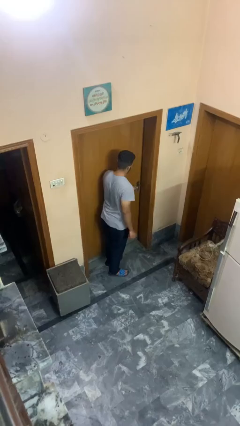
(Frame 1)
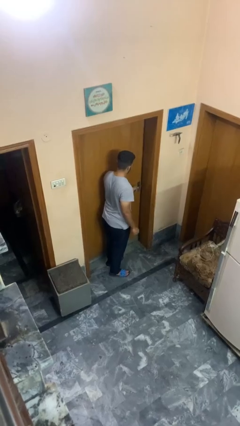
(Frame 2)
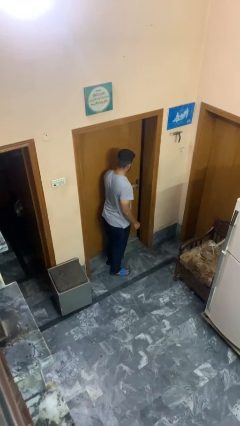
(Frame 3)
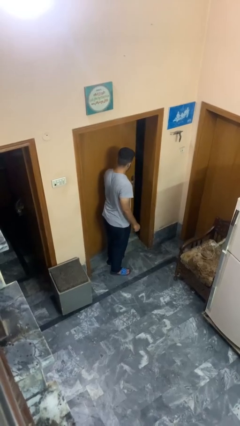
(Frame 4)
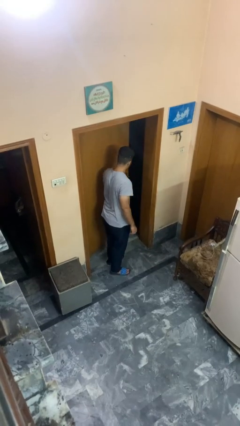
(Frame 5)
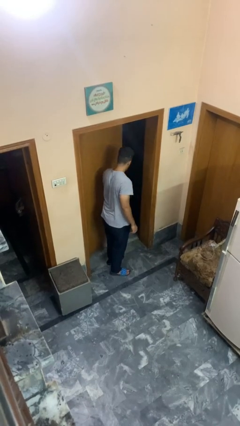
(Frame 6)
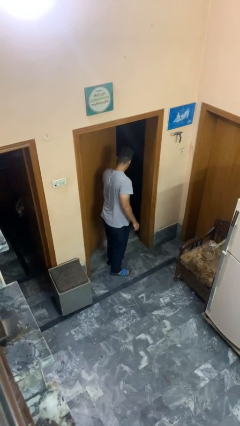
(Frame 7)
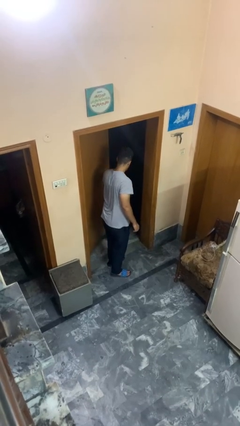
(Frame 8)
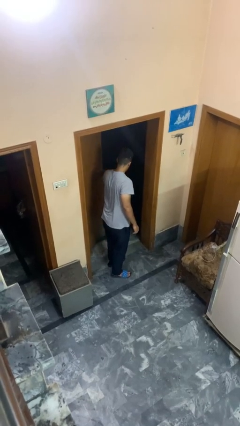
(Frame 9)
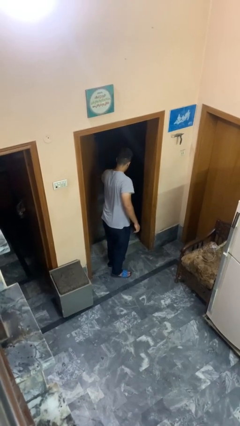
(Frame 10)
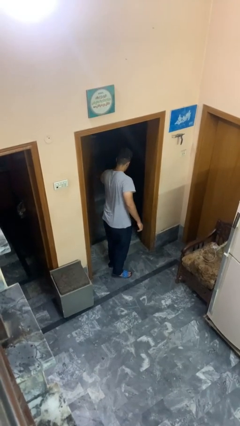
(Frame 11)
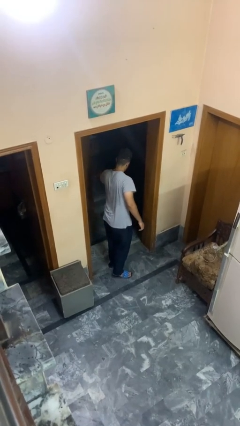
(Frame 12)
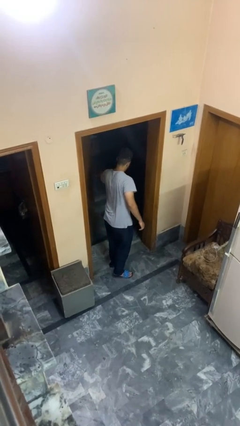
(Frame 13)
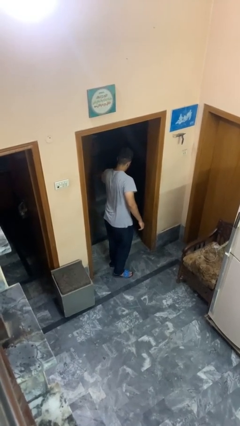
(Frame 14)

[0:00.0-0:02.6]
person opens facility door

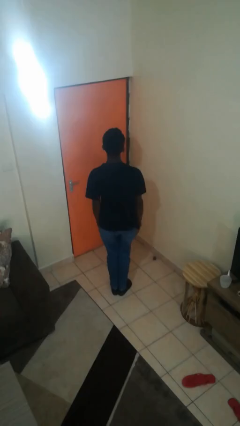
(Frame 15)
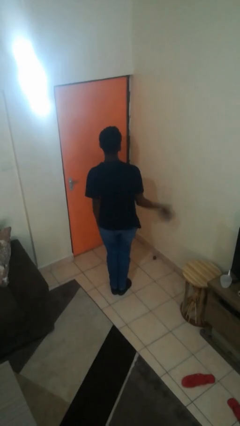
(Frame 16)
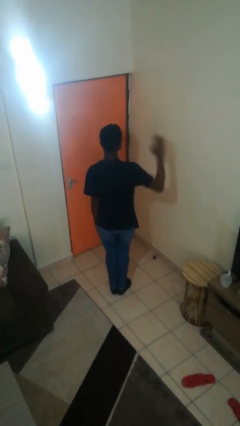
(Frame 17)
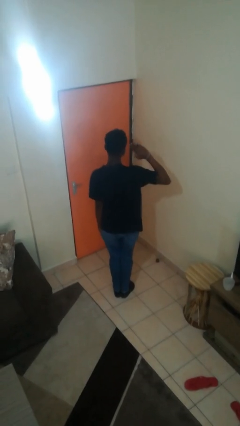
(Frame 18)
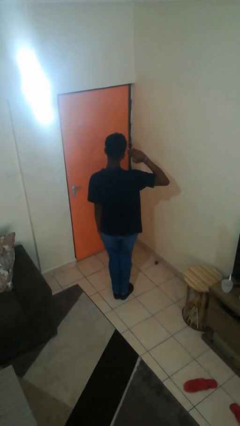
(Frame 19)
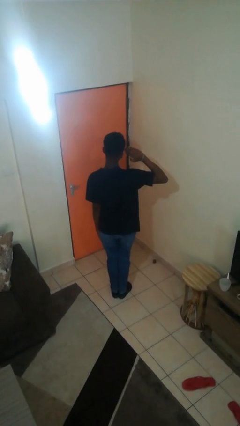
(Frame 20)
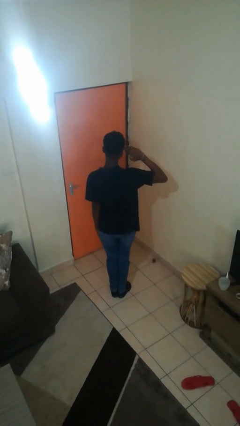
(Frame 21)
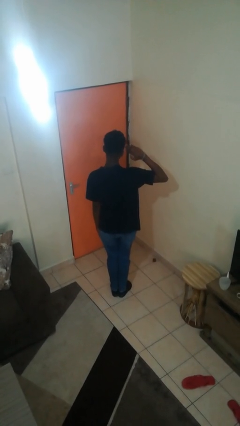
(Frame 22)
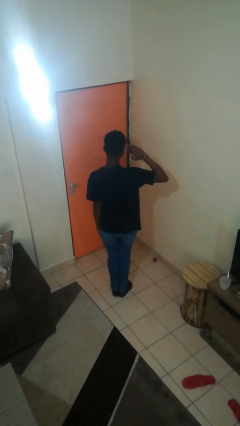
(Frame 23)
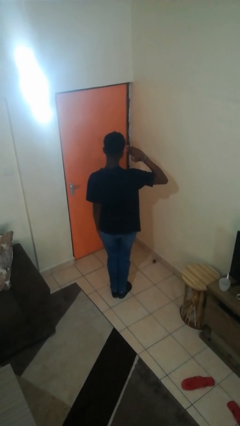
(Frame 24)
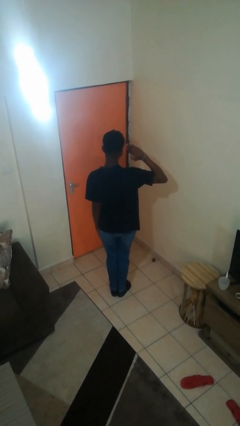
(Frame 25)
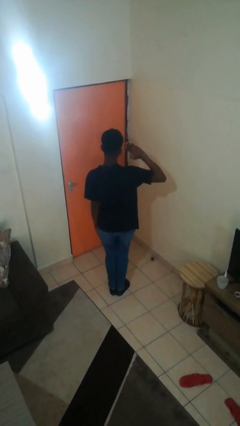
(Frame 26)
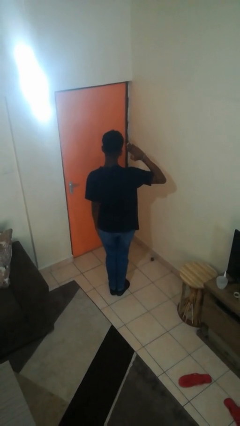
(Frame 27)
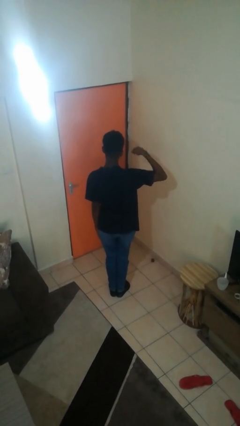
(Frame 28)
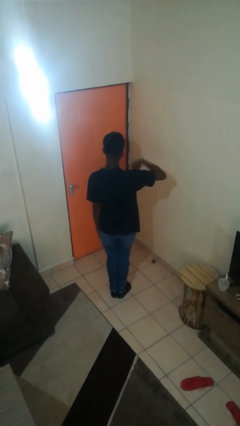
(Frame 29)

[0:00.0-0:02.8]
person salutes

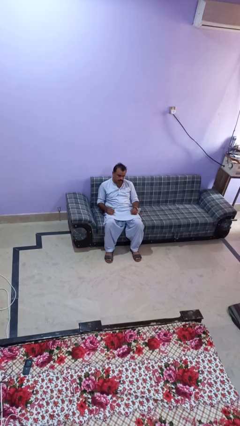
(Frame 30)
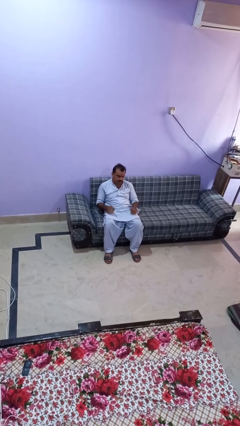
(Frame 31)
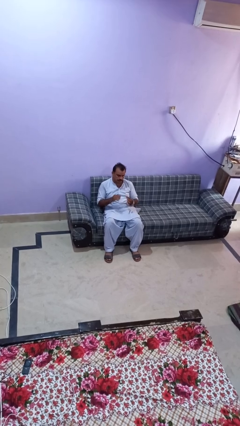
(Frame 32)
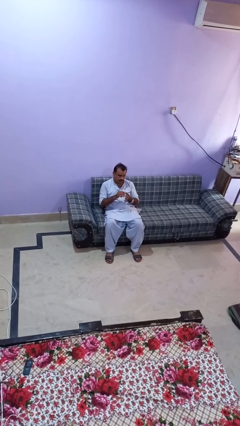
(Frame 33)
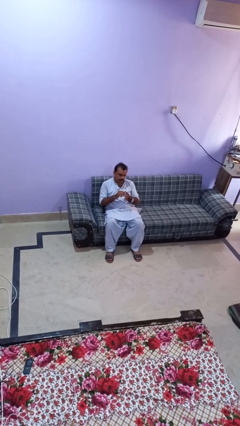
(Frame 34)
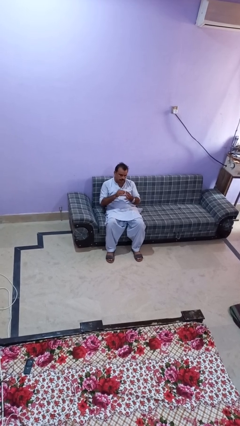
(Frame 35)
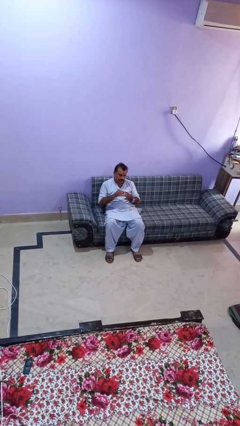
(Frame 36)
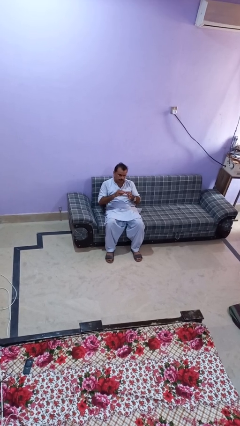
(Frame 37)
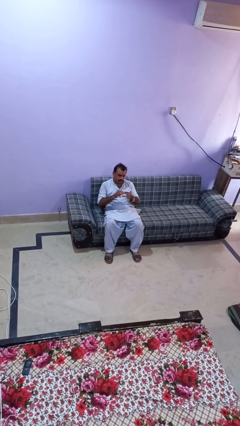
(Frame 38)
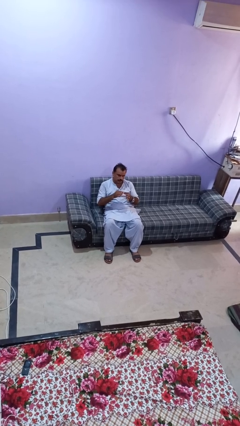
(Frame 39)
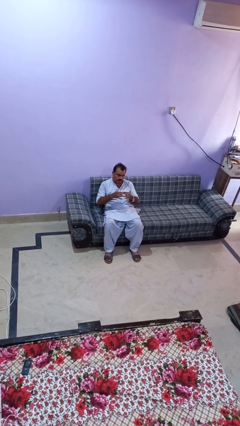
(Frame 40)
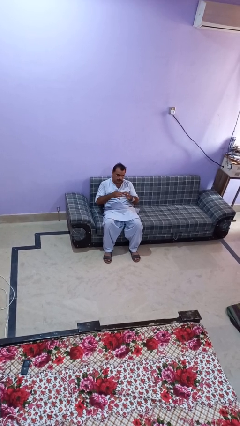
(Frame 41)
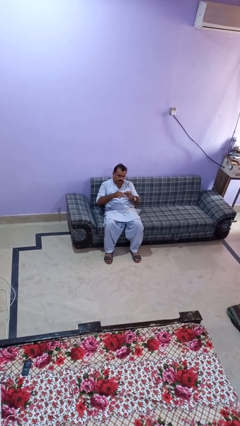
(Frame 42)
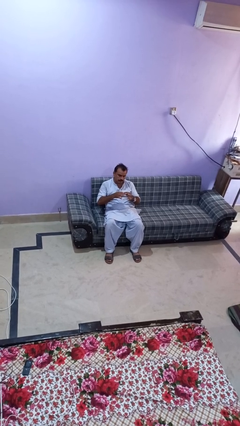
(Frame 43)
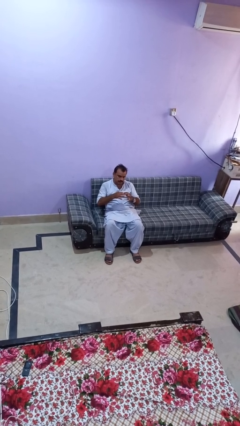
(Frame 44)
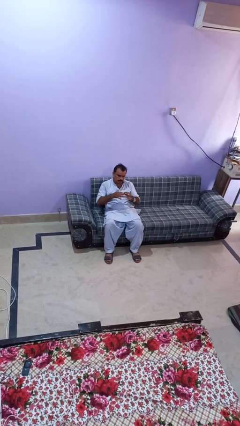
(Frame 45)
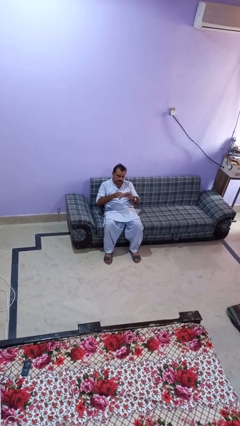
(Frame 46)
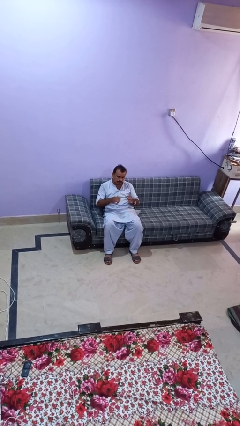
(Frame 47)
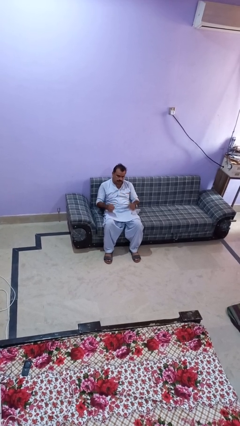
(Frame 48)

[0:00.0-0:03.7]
person files fingernails

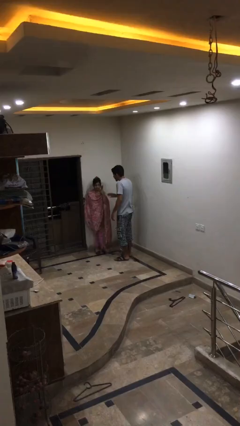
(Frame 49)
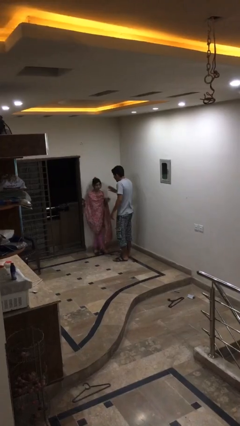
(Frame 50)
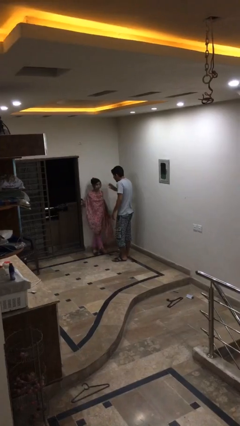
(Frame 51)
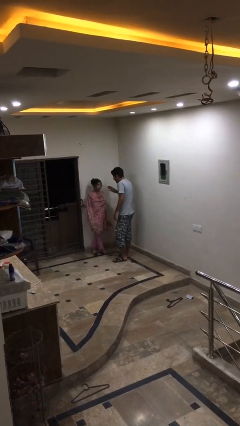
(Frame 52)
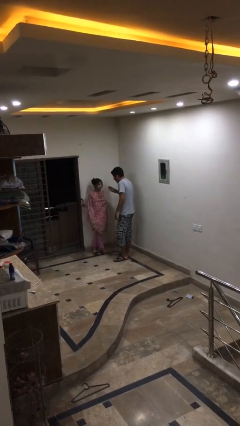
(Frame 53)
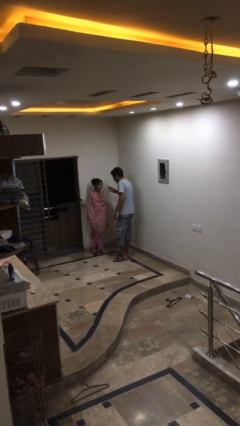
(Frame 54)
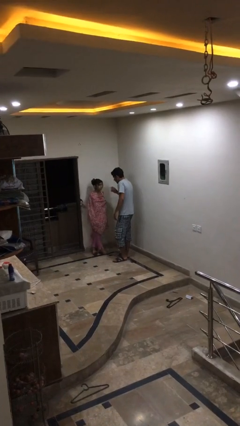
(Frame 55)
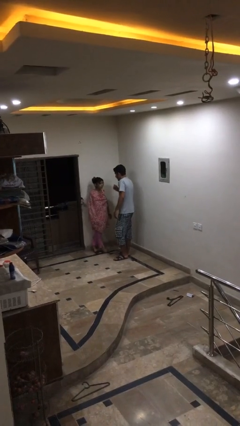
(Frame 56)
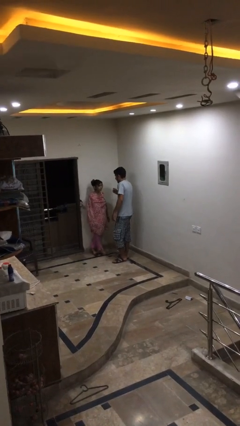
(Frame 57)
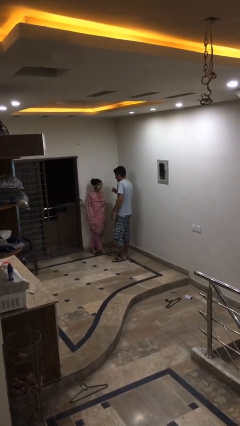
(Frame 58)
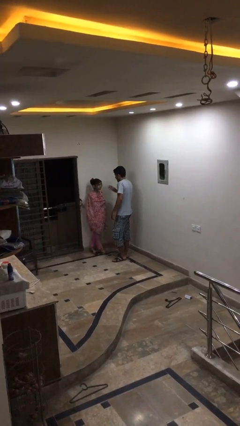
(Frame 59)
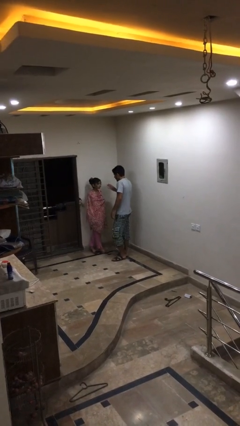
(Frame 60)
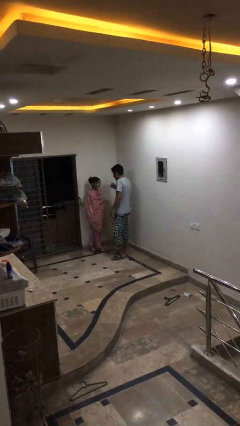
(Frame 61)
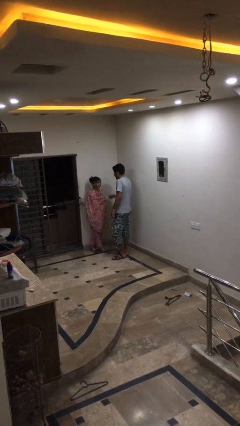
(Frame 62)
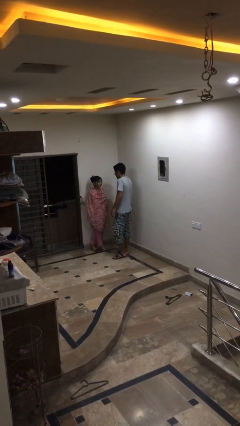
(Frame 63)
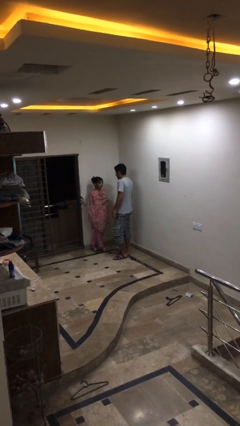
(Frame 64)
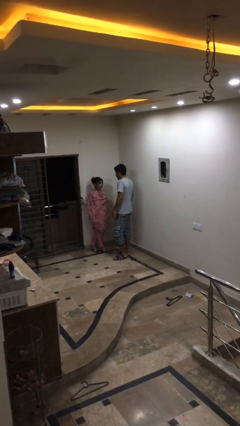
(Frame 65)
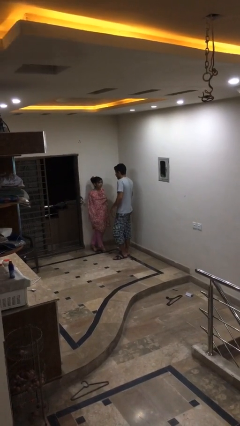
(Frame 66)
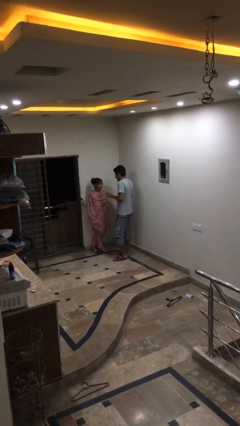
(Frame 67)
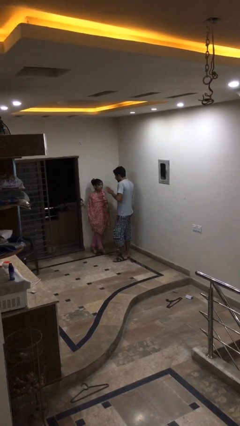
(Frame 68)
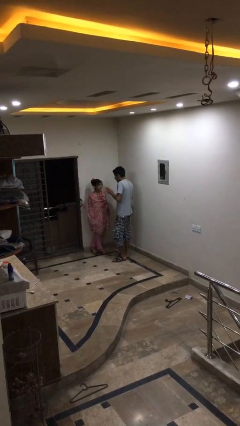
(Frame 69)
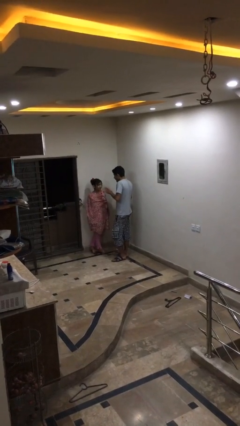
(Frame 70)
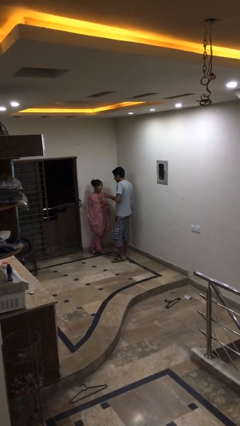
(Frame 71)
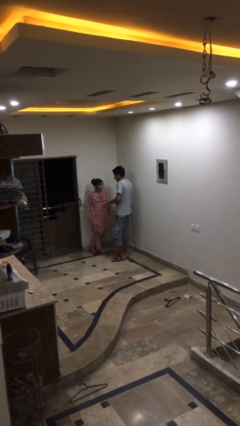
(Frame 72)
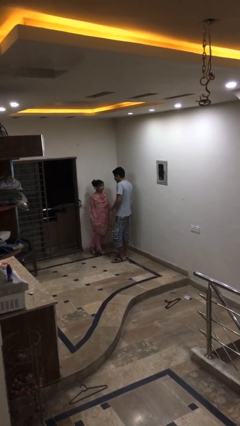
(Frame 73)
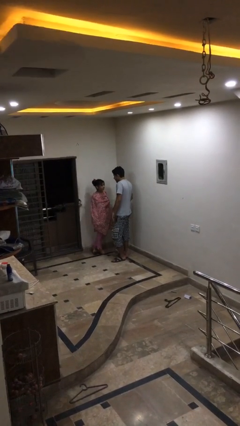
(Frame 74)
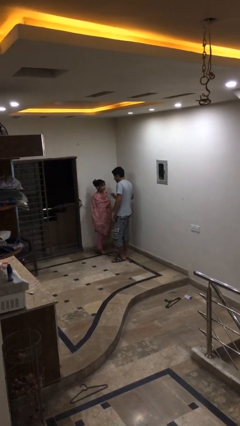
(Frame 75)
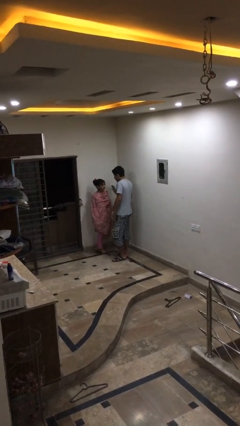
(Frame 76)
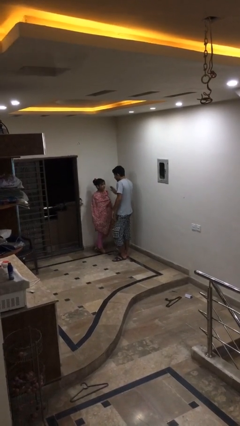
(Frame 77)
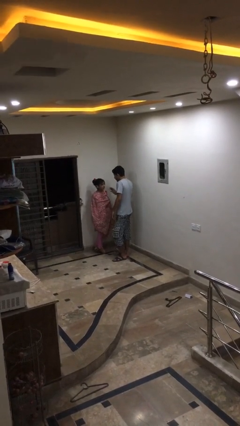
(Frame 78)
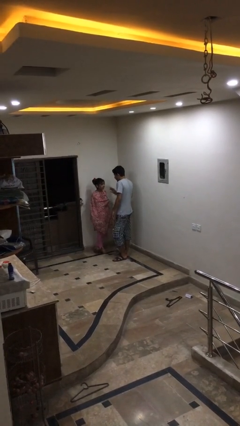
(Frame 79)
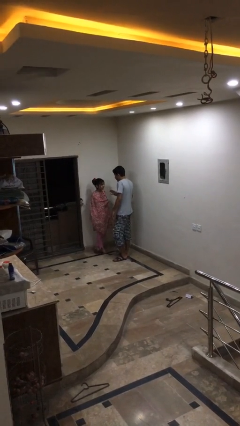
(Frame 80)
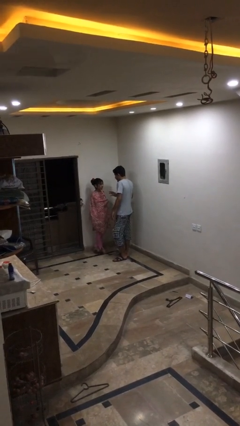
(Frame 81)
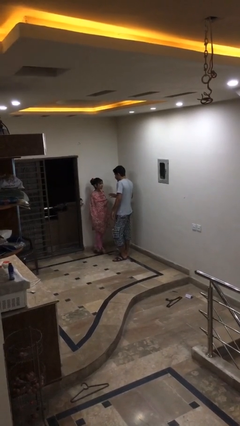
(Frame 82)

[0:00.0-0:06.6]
person talks to person

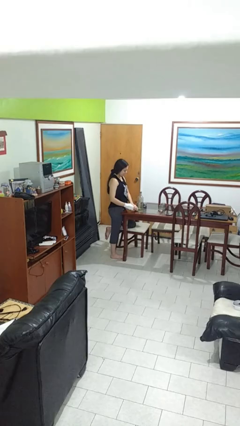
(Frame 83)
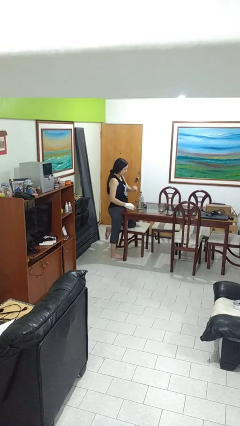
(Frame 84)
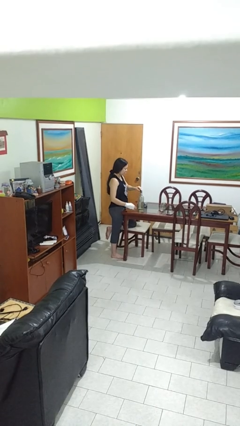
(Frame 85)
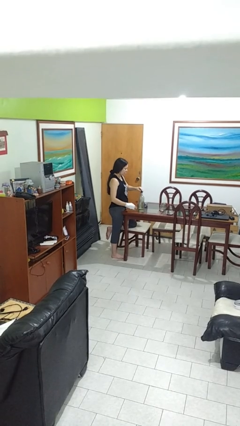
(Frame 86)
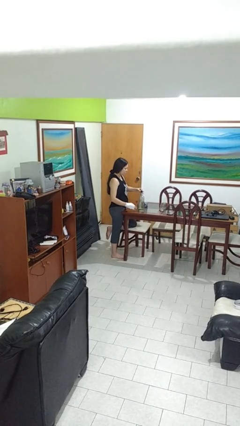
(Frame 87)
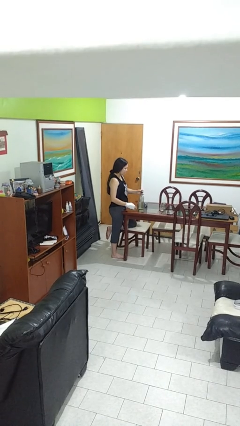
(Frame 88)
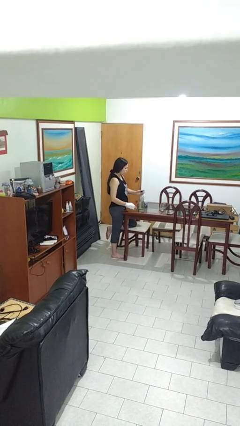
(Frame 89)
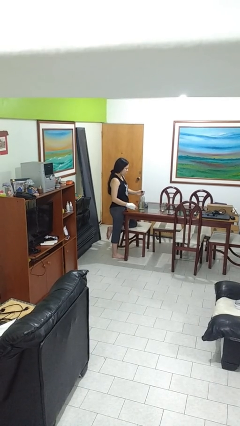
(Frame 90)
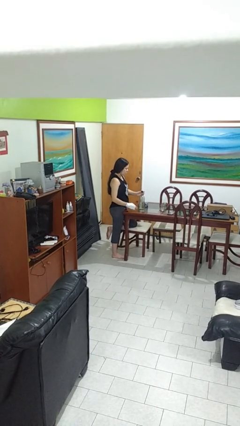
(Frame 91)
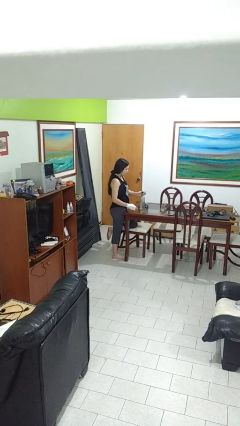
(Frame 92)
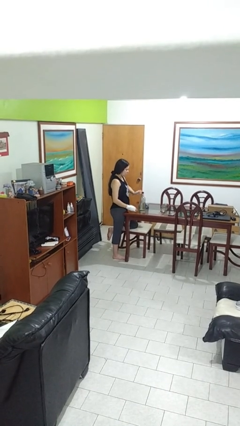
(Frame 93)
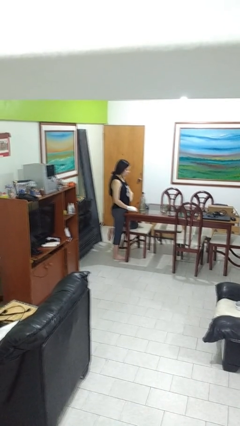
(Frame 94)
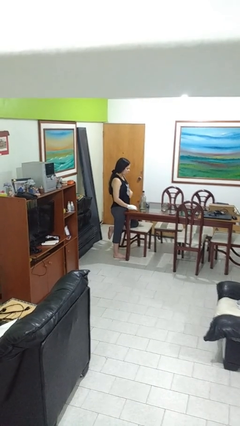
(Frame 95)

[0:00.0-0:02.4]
person screws lid to bottle
